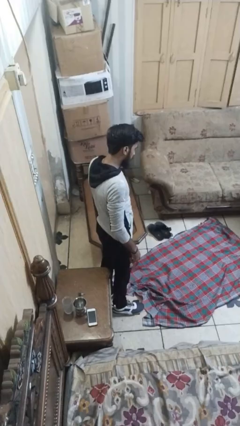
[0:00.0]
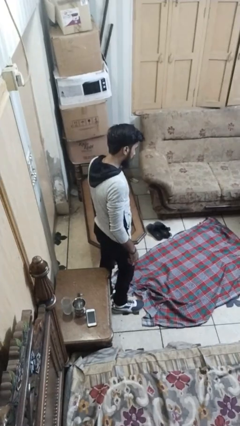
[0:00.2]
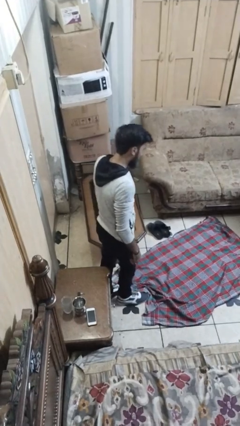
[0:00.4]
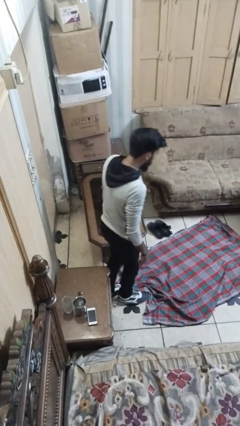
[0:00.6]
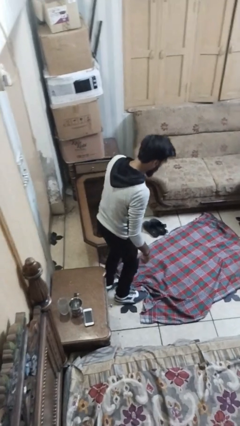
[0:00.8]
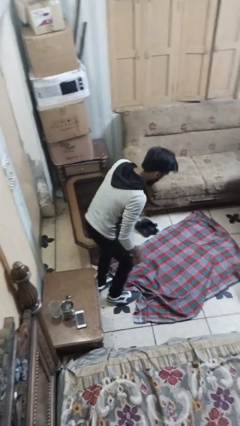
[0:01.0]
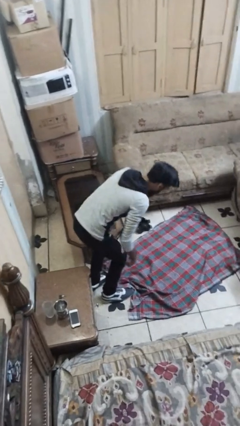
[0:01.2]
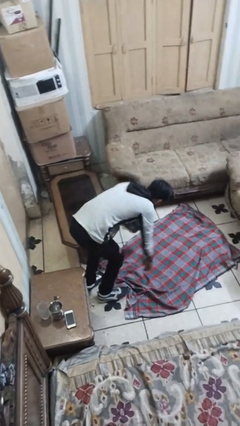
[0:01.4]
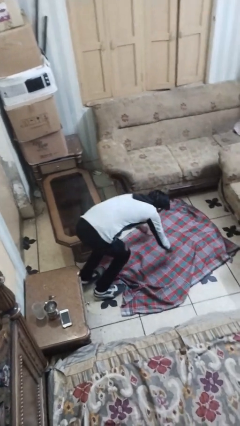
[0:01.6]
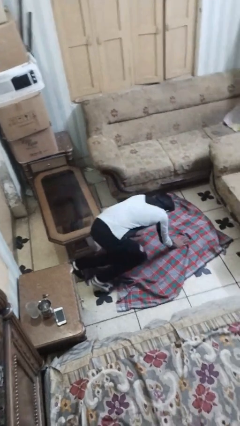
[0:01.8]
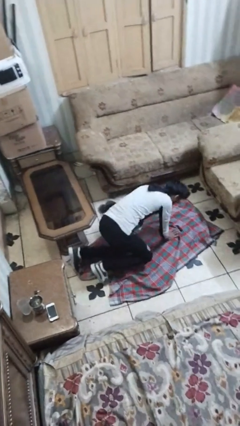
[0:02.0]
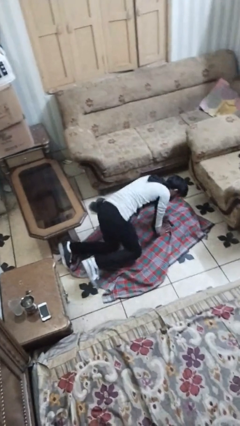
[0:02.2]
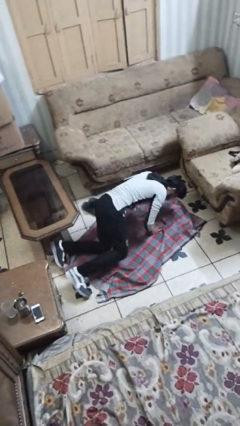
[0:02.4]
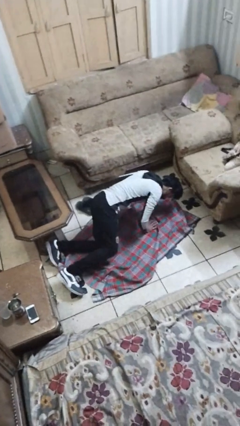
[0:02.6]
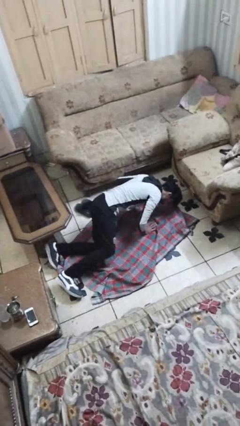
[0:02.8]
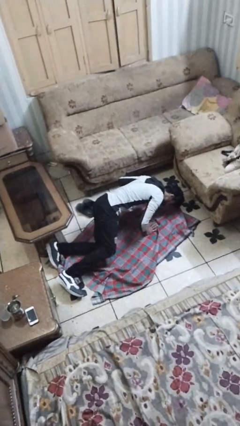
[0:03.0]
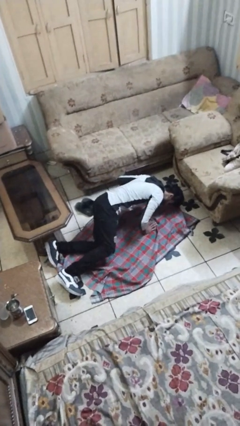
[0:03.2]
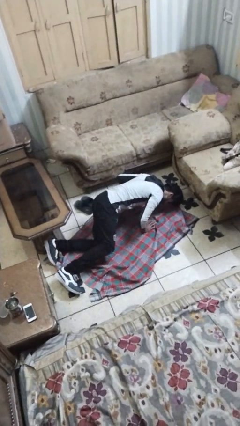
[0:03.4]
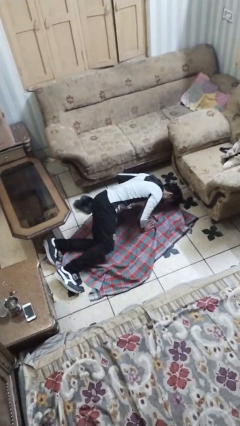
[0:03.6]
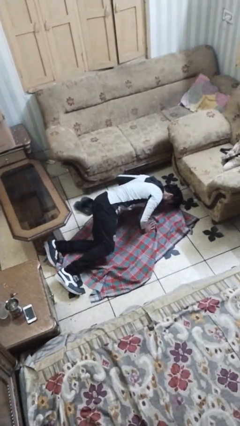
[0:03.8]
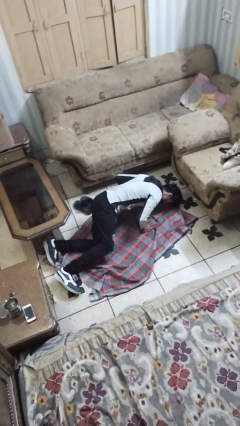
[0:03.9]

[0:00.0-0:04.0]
person trips on object on floor

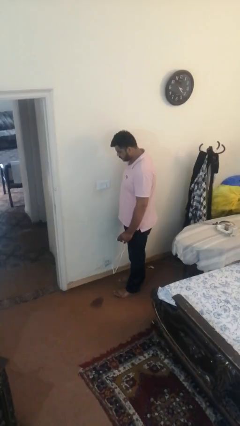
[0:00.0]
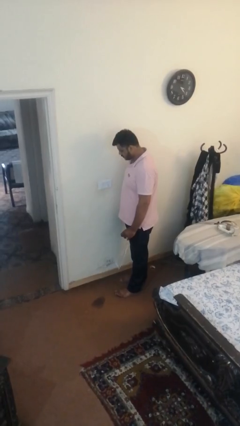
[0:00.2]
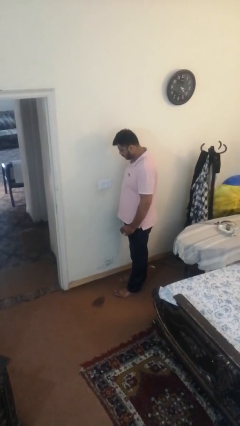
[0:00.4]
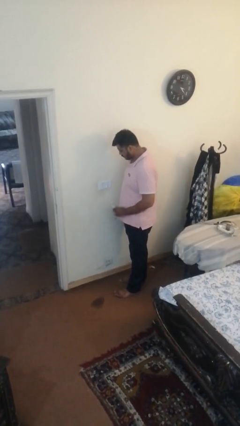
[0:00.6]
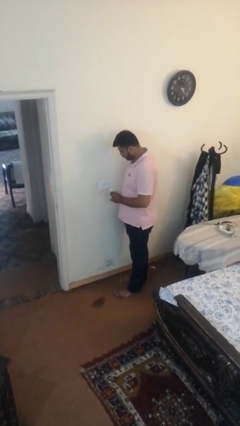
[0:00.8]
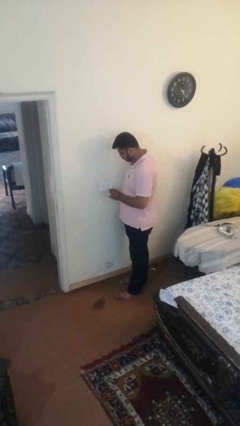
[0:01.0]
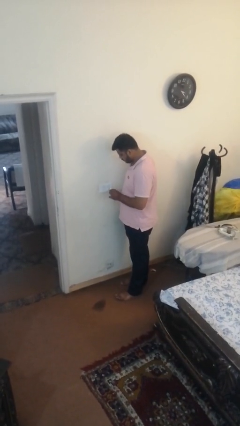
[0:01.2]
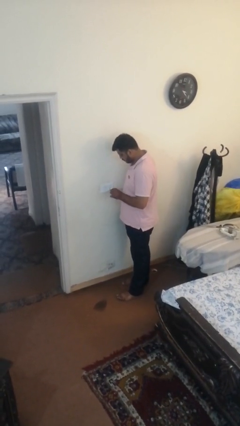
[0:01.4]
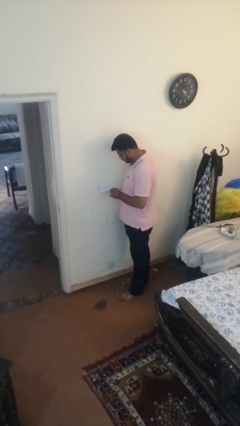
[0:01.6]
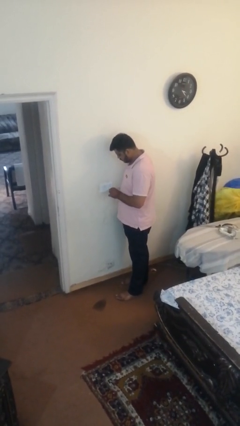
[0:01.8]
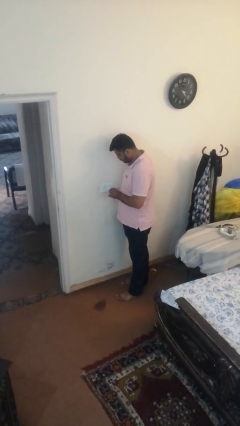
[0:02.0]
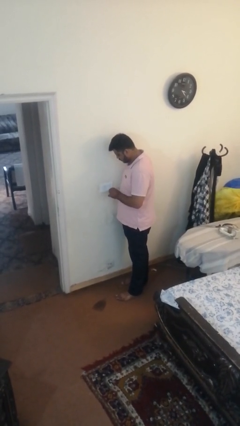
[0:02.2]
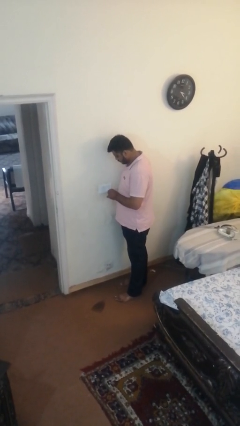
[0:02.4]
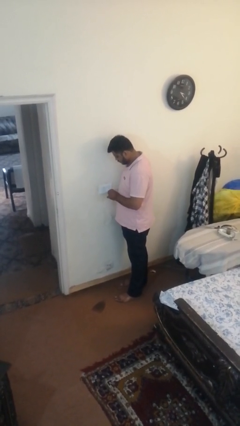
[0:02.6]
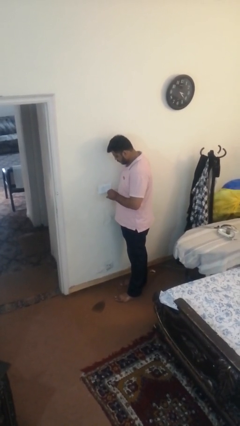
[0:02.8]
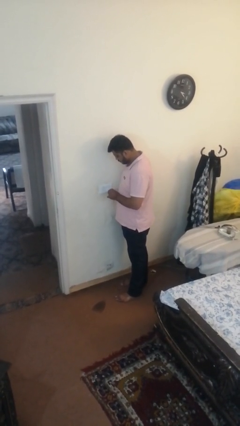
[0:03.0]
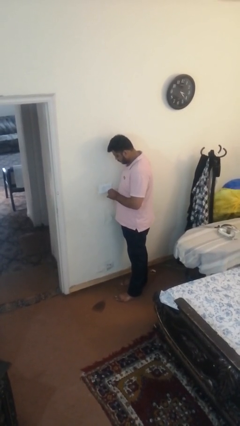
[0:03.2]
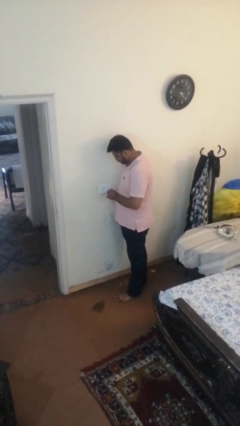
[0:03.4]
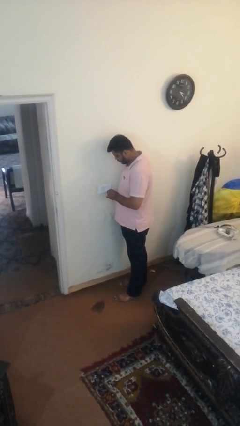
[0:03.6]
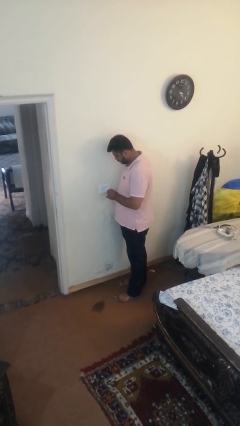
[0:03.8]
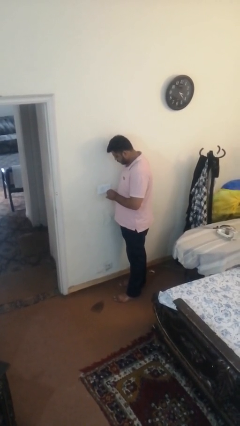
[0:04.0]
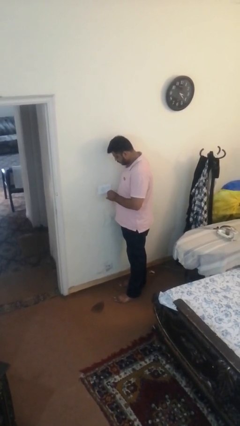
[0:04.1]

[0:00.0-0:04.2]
person plugs into electrical socket

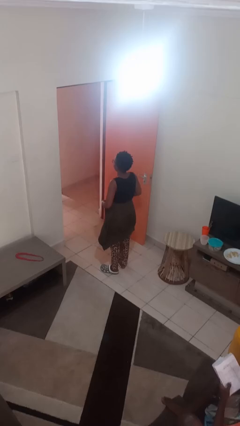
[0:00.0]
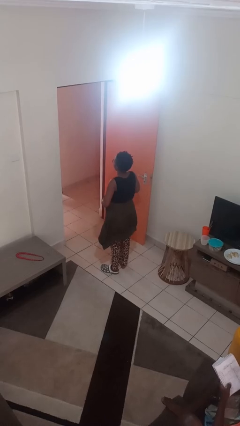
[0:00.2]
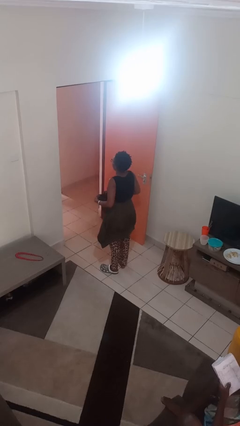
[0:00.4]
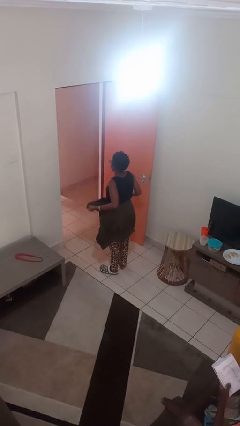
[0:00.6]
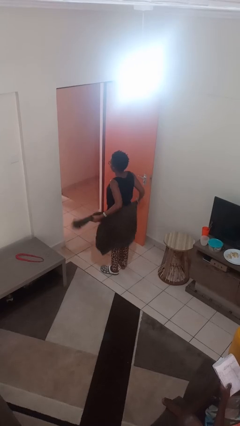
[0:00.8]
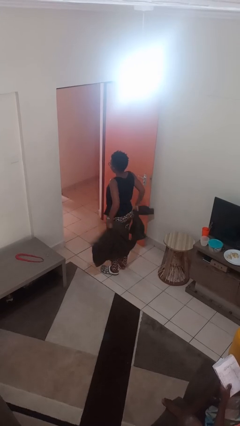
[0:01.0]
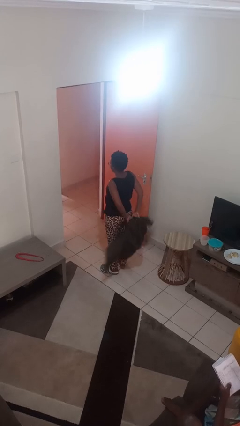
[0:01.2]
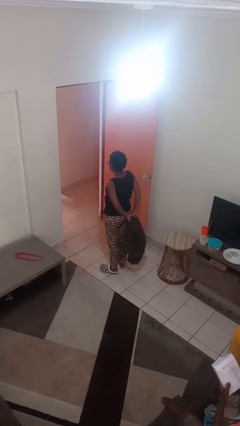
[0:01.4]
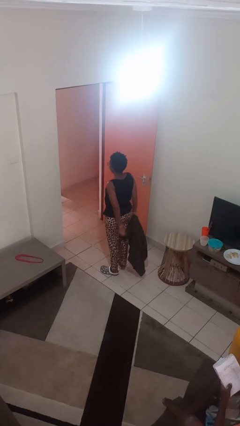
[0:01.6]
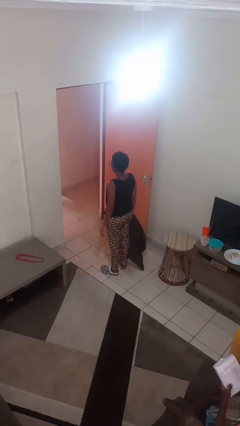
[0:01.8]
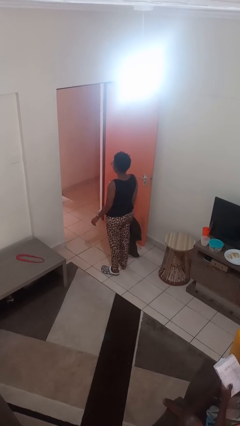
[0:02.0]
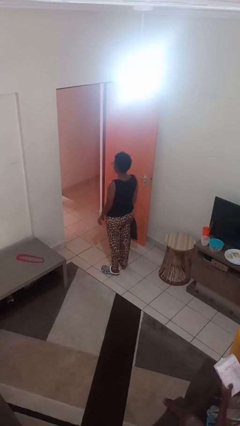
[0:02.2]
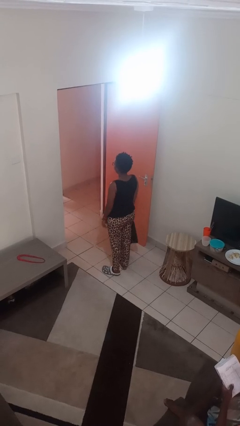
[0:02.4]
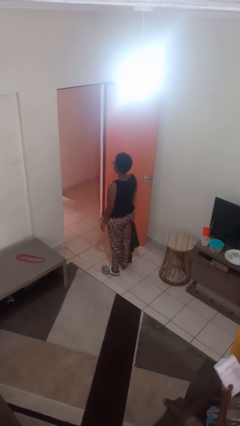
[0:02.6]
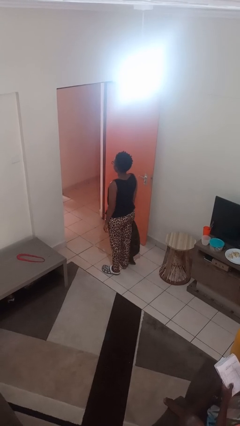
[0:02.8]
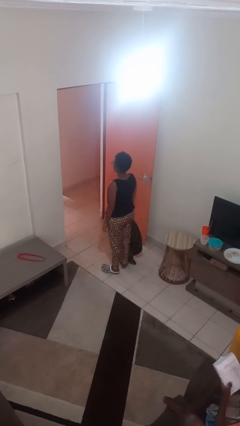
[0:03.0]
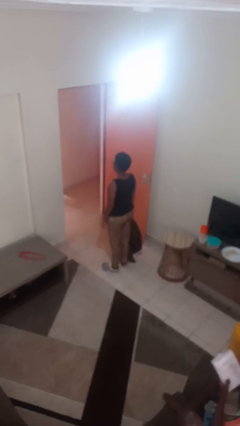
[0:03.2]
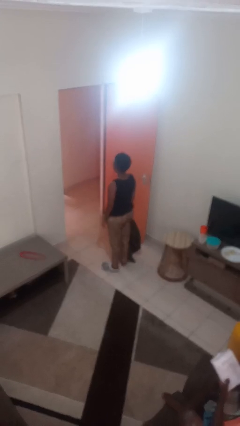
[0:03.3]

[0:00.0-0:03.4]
person unties jacket around waist

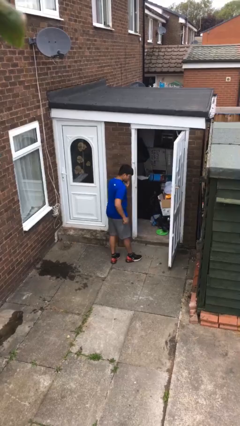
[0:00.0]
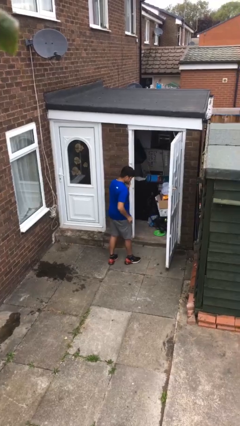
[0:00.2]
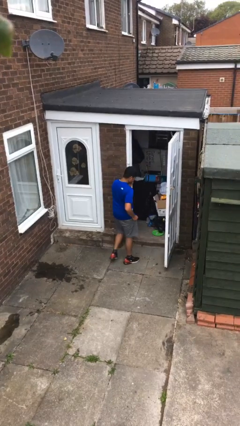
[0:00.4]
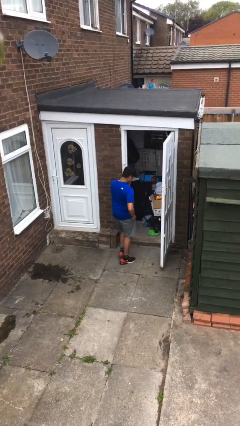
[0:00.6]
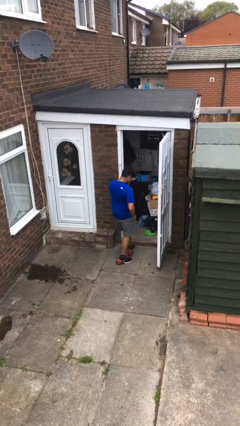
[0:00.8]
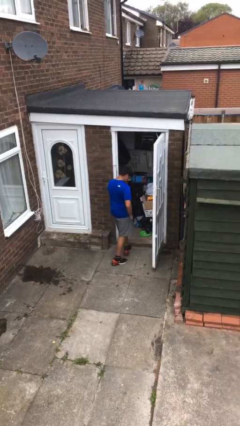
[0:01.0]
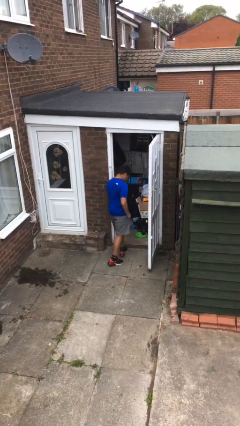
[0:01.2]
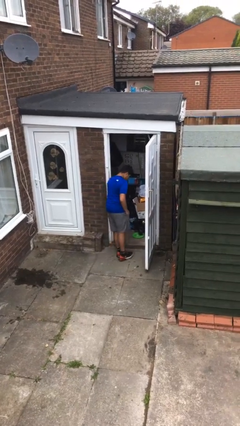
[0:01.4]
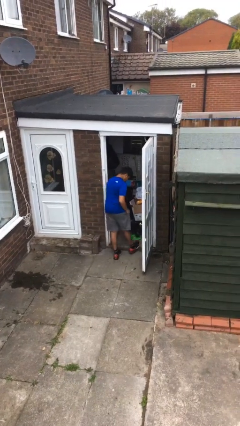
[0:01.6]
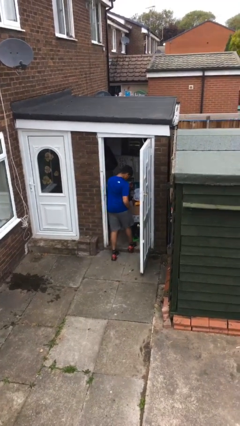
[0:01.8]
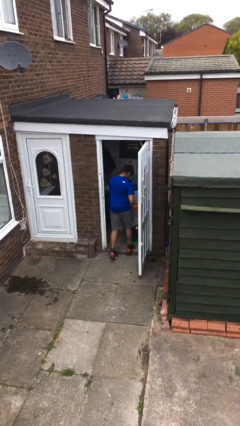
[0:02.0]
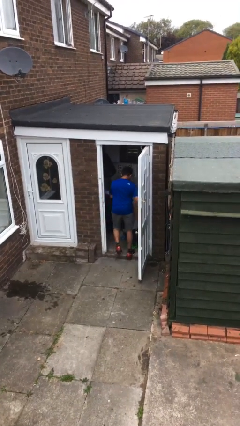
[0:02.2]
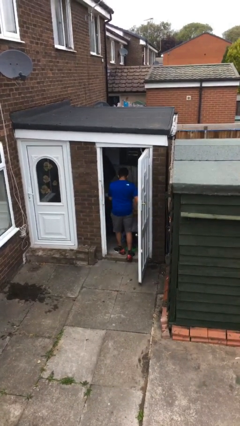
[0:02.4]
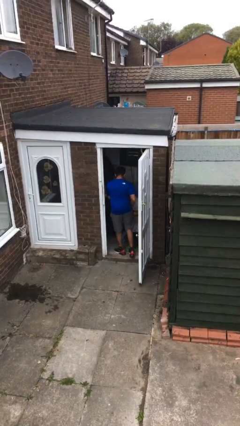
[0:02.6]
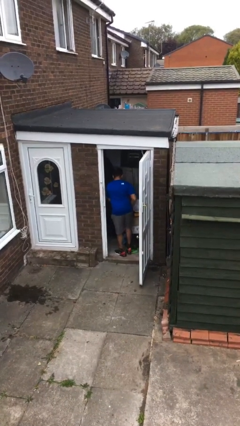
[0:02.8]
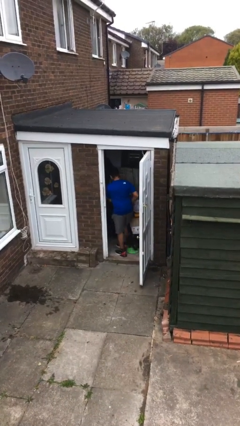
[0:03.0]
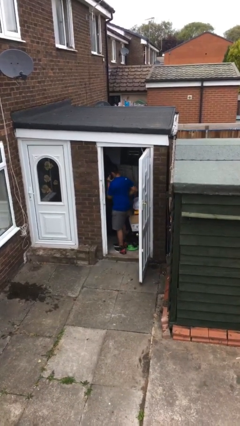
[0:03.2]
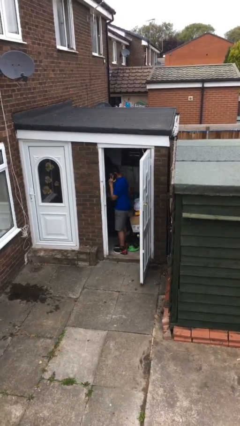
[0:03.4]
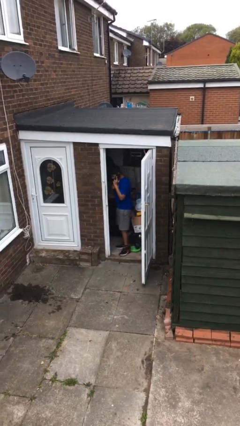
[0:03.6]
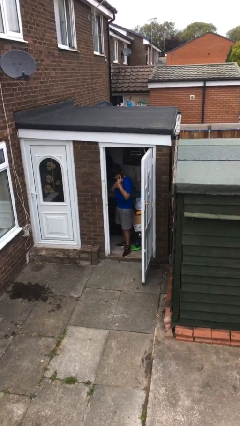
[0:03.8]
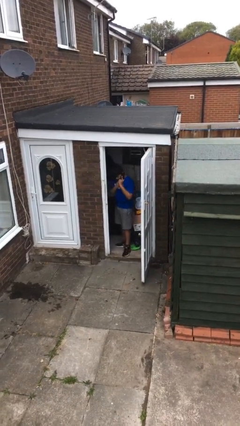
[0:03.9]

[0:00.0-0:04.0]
person exits scene through structure

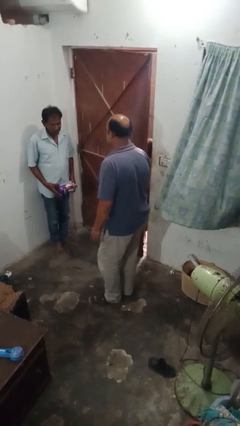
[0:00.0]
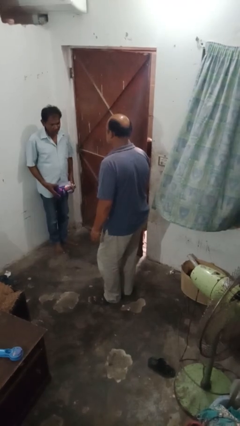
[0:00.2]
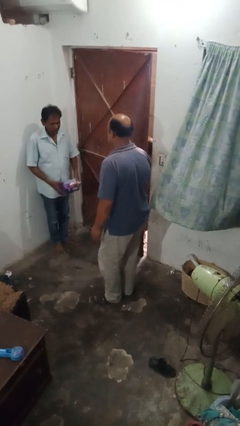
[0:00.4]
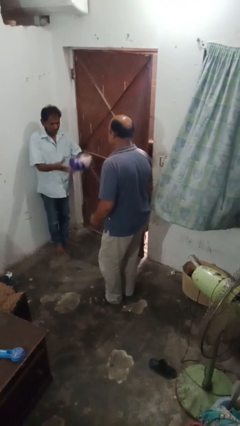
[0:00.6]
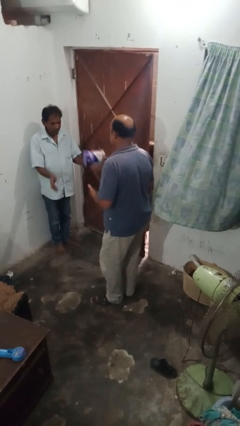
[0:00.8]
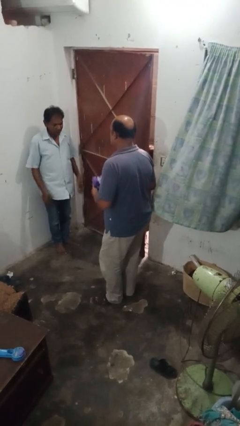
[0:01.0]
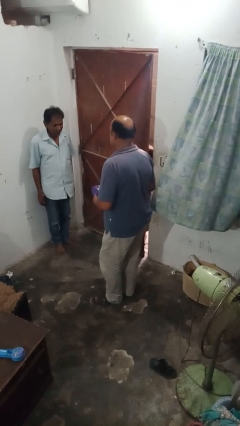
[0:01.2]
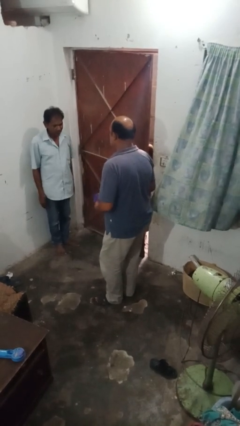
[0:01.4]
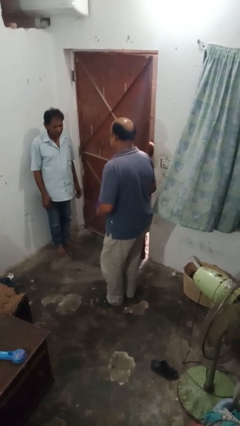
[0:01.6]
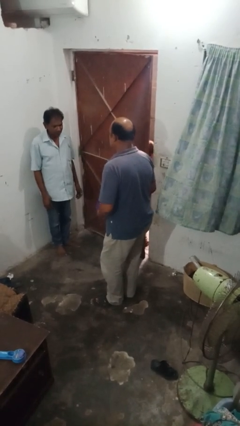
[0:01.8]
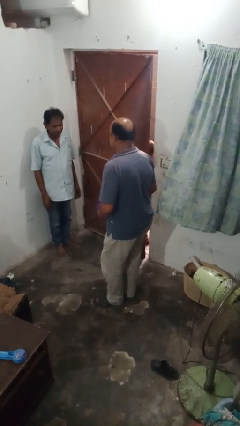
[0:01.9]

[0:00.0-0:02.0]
person catches object from person
